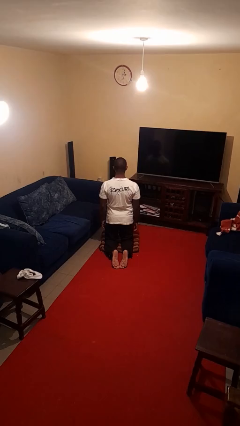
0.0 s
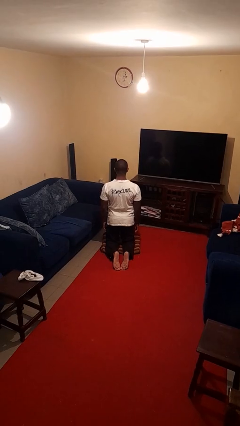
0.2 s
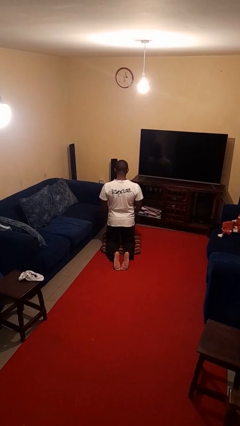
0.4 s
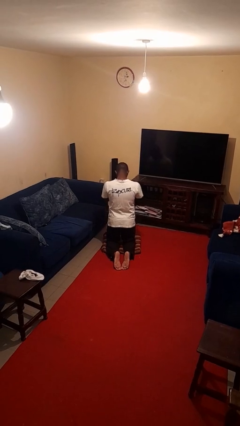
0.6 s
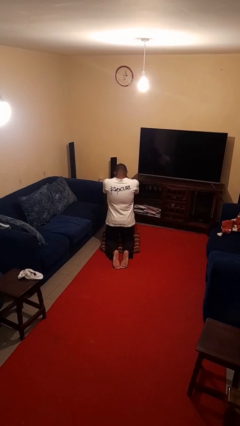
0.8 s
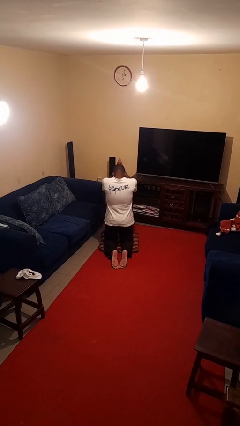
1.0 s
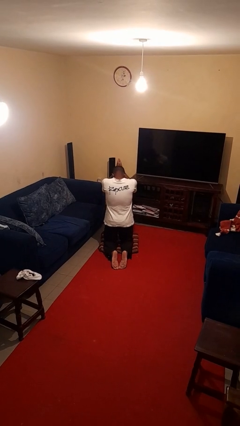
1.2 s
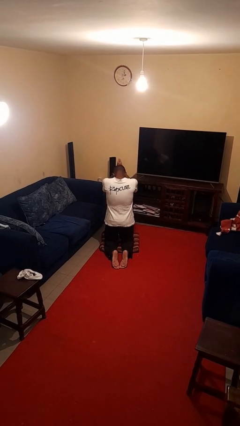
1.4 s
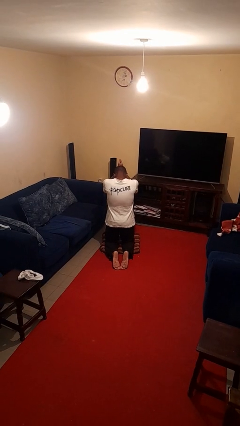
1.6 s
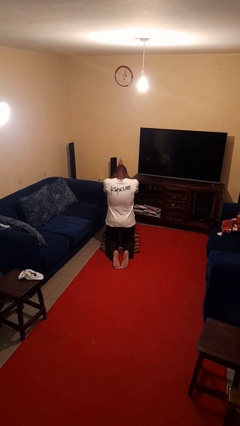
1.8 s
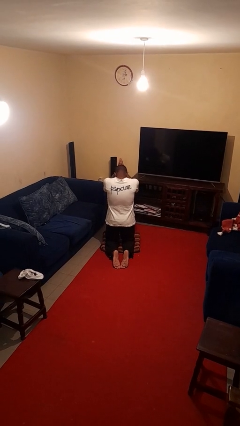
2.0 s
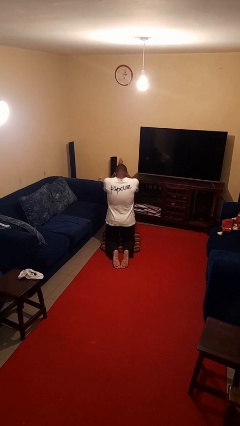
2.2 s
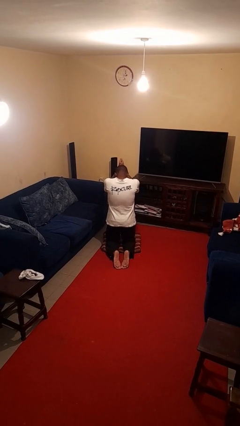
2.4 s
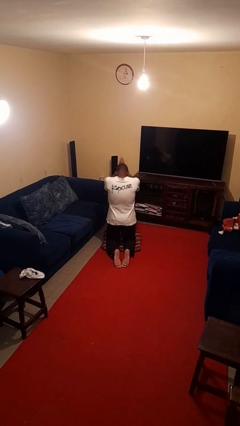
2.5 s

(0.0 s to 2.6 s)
person prays

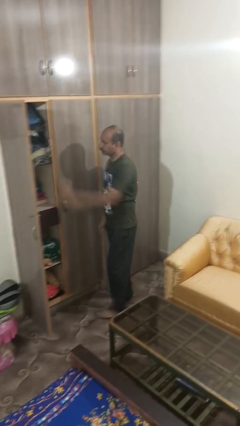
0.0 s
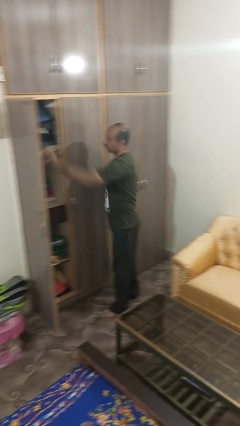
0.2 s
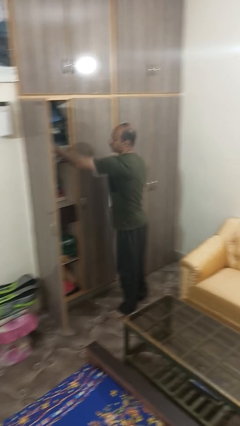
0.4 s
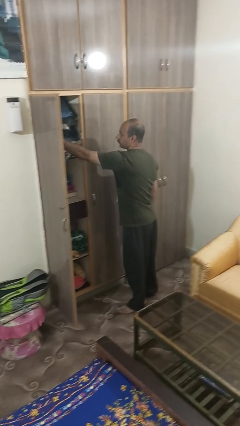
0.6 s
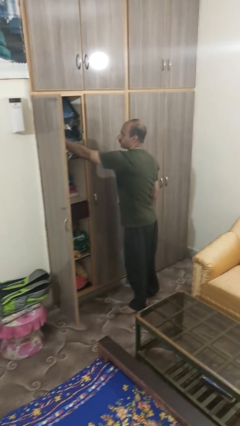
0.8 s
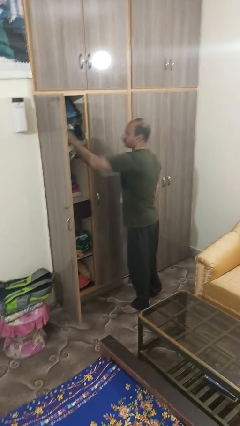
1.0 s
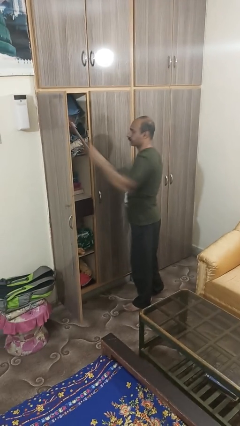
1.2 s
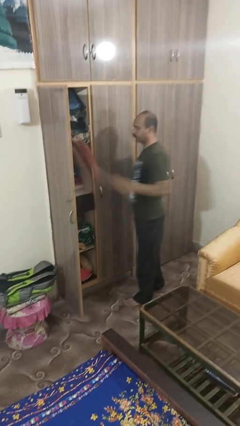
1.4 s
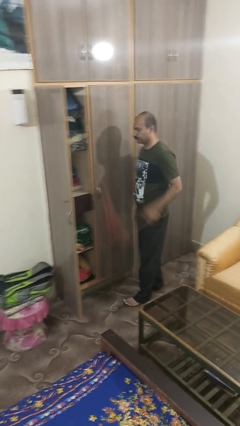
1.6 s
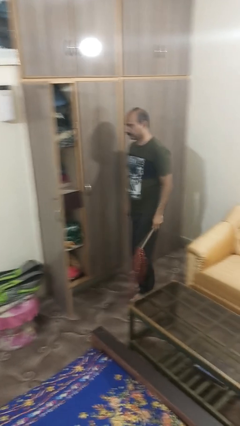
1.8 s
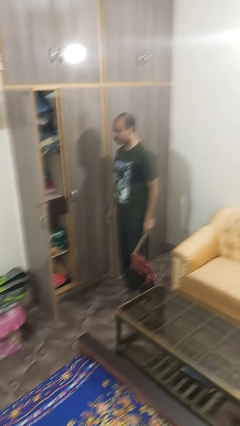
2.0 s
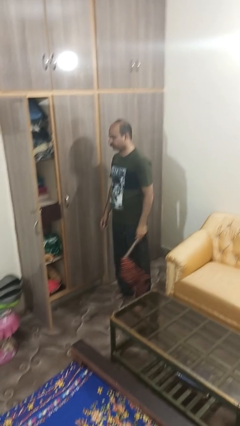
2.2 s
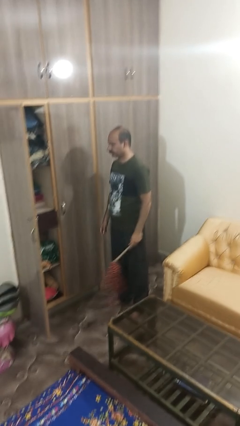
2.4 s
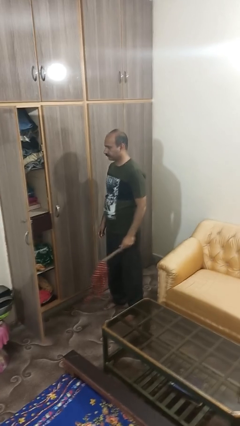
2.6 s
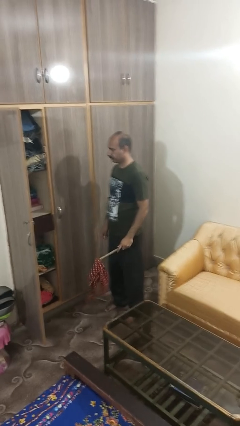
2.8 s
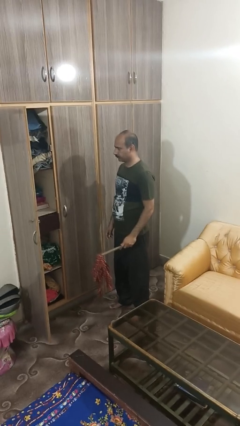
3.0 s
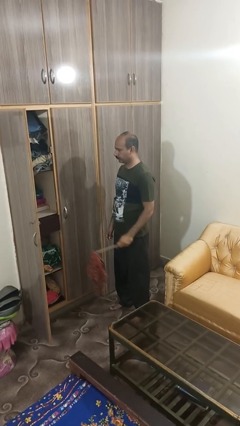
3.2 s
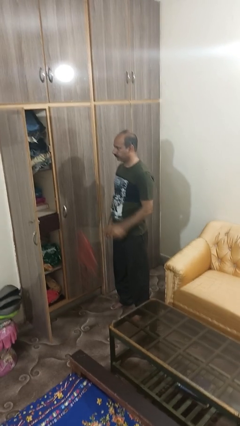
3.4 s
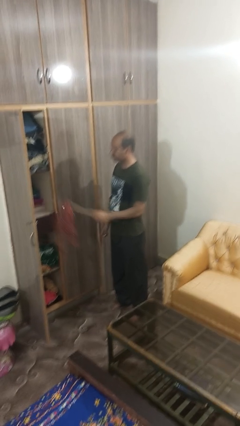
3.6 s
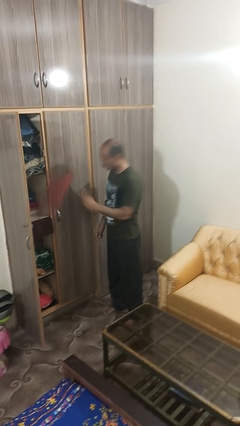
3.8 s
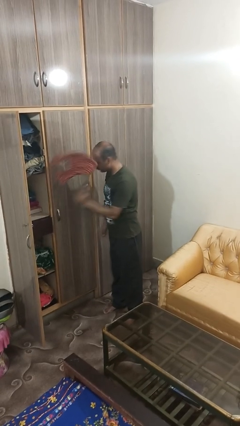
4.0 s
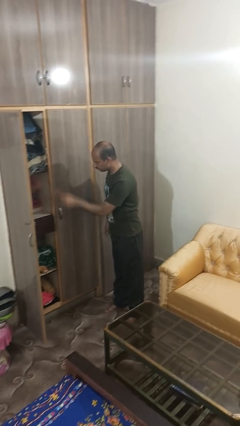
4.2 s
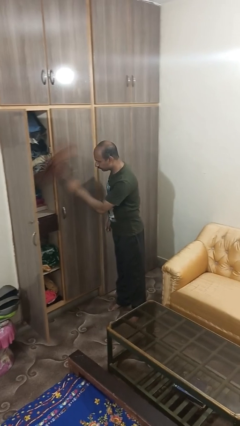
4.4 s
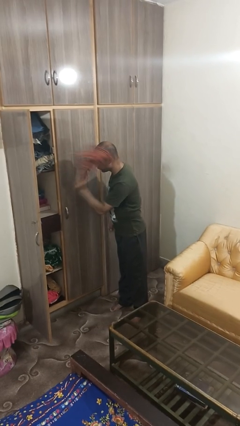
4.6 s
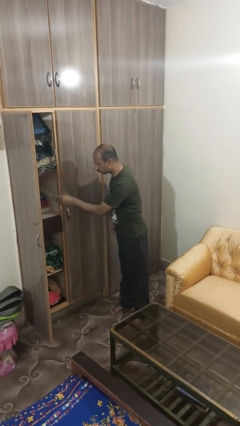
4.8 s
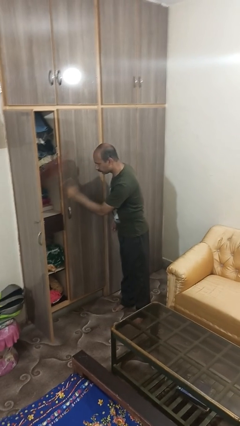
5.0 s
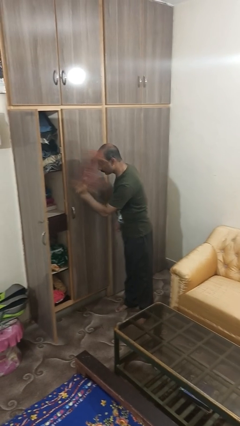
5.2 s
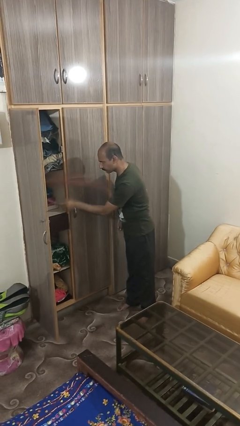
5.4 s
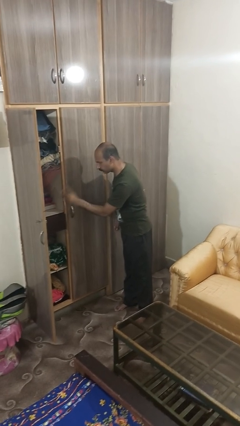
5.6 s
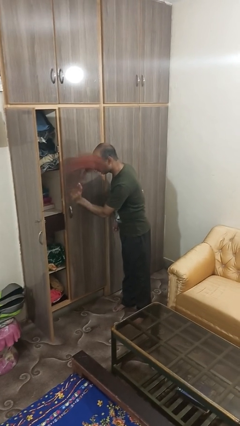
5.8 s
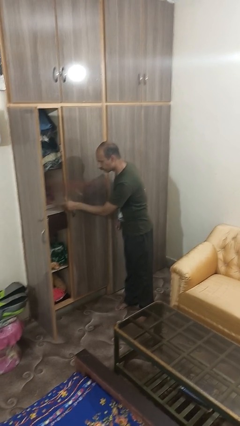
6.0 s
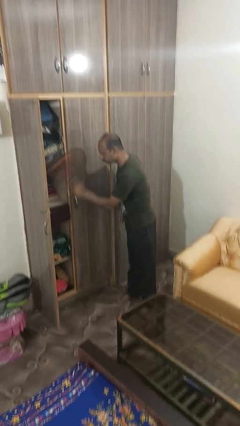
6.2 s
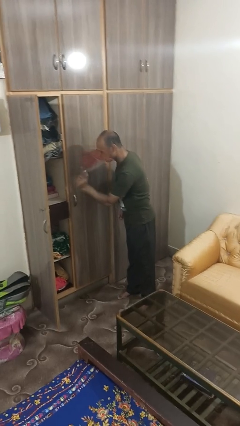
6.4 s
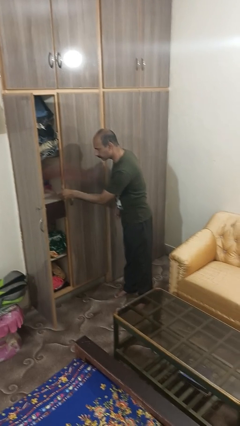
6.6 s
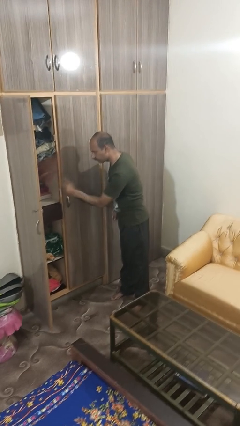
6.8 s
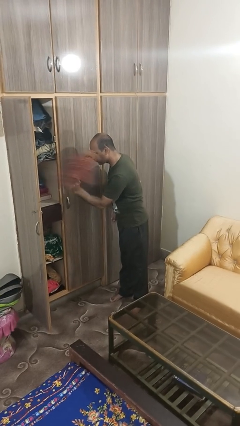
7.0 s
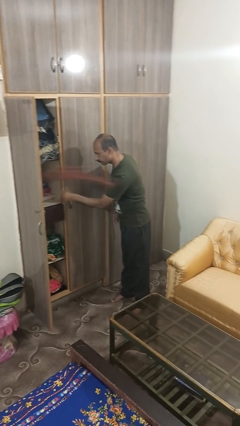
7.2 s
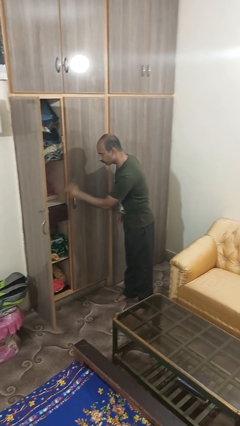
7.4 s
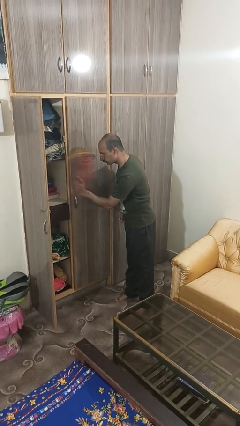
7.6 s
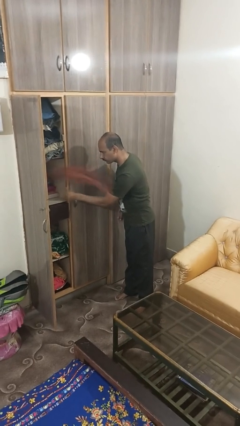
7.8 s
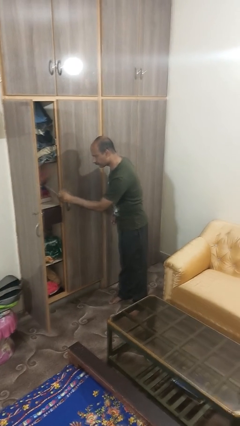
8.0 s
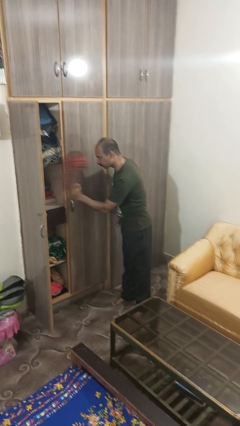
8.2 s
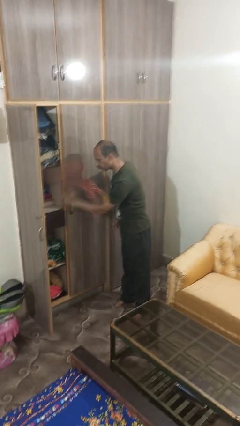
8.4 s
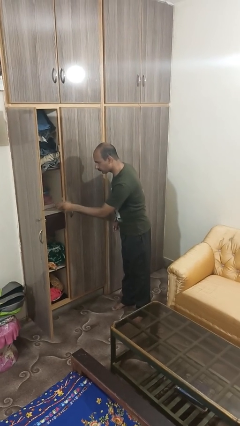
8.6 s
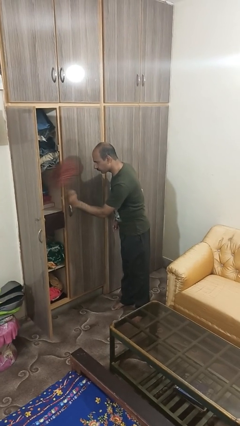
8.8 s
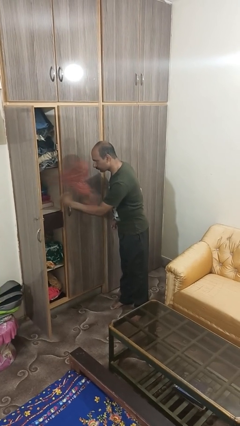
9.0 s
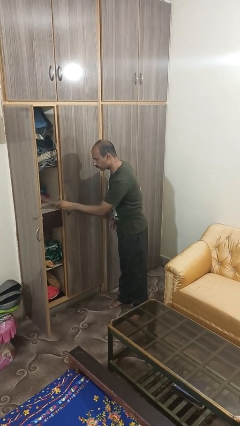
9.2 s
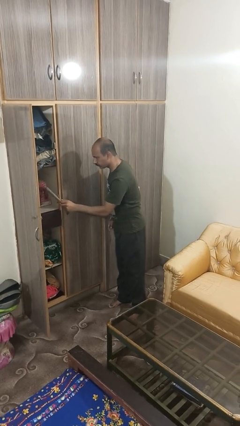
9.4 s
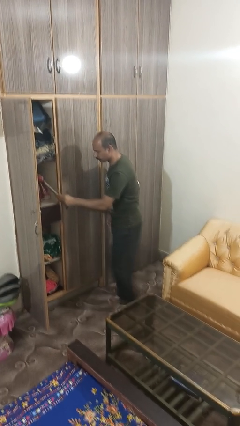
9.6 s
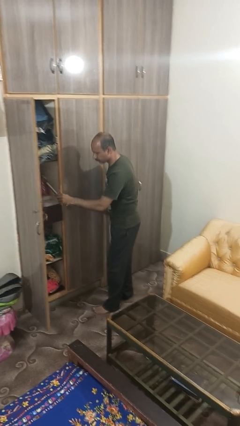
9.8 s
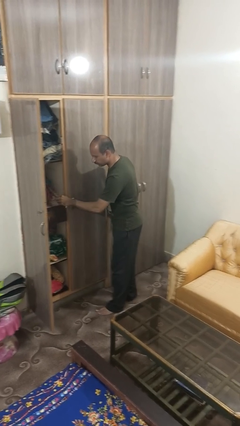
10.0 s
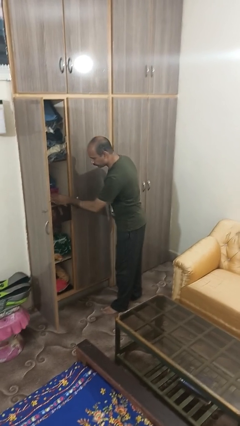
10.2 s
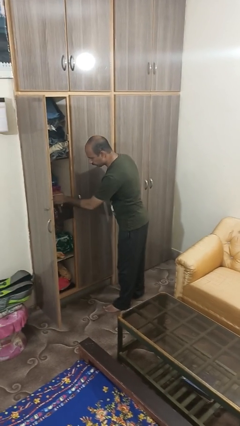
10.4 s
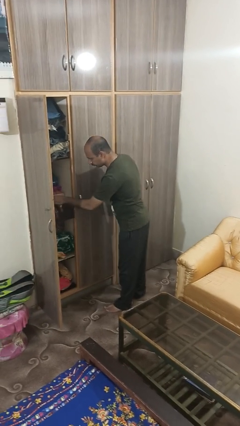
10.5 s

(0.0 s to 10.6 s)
person dusts furniture

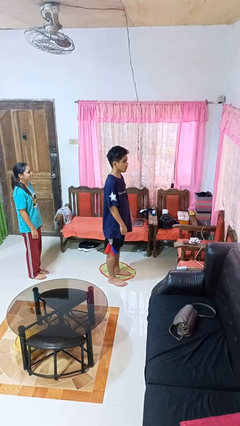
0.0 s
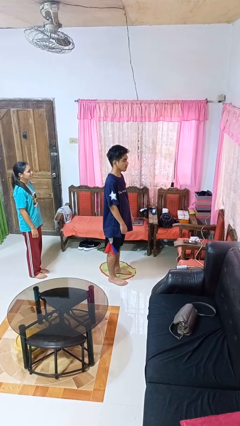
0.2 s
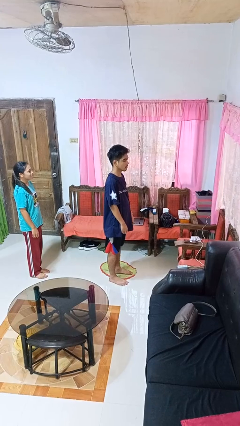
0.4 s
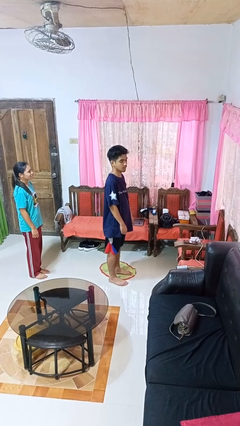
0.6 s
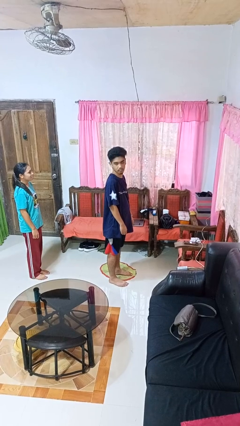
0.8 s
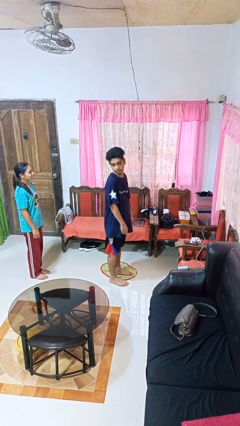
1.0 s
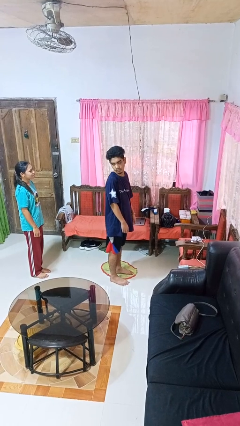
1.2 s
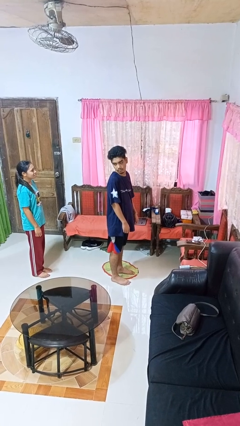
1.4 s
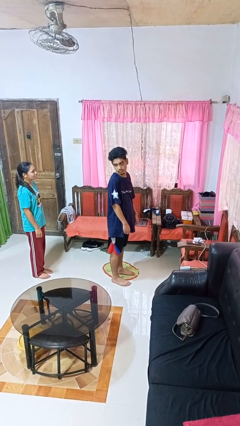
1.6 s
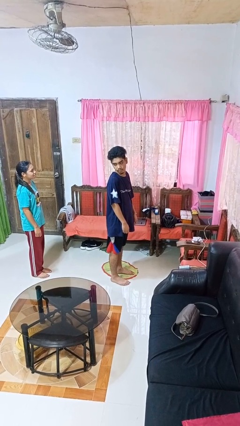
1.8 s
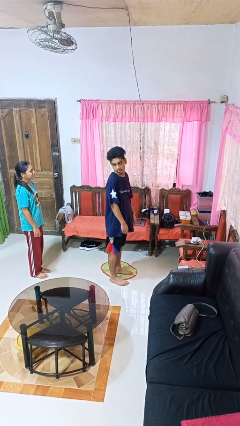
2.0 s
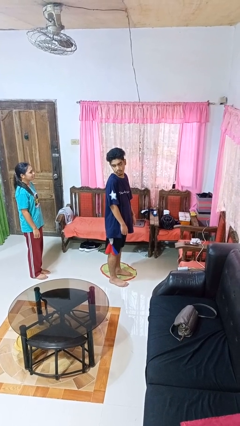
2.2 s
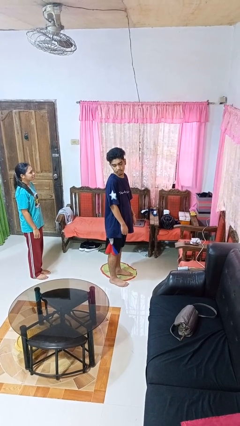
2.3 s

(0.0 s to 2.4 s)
person looks over shoulder

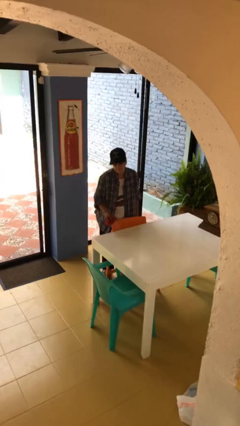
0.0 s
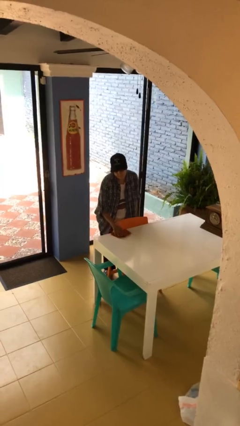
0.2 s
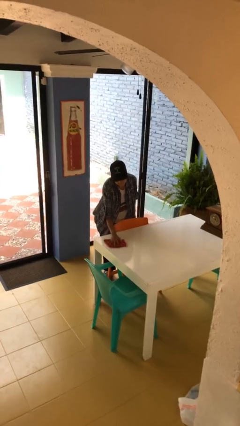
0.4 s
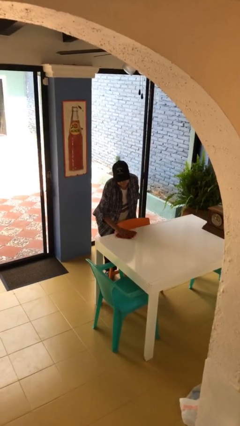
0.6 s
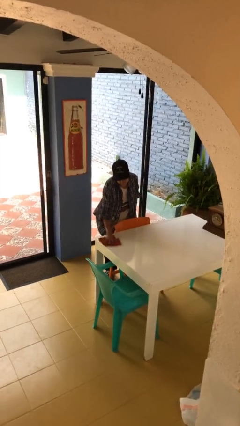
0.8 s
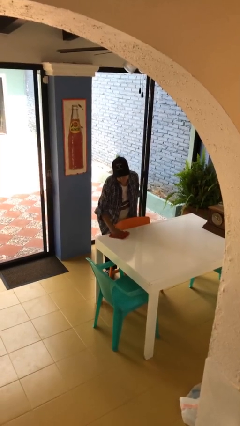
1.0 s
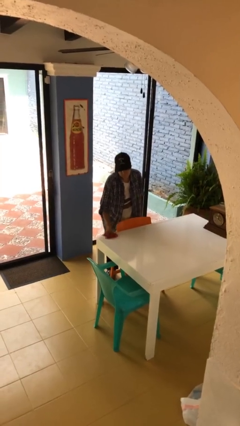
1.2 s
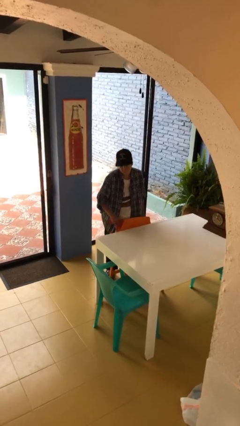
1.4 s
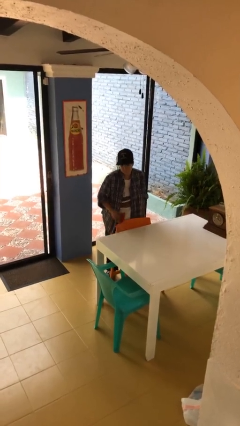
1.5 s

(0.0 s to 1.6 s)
person cleans table with rag

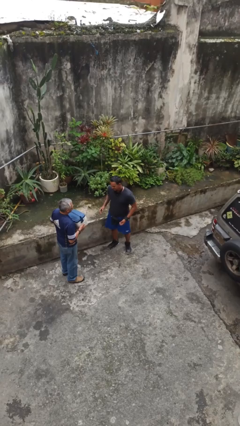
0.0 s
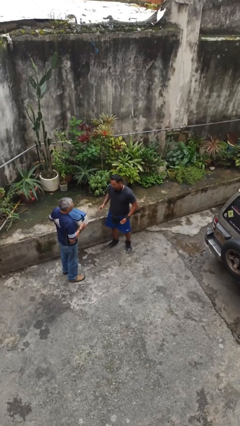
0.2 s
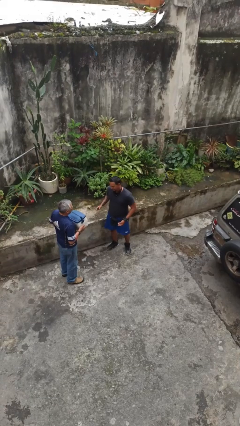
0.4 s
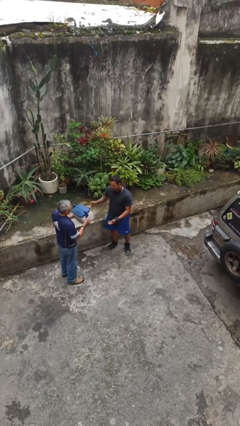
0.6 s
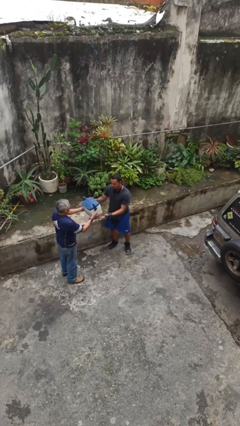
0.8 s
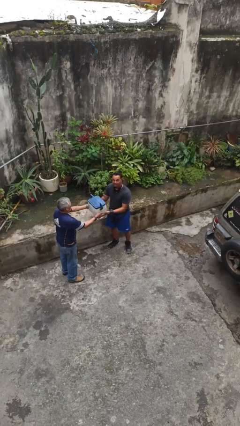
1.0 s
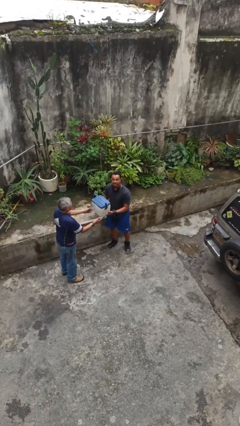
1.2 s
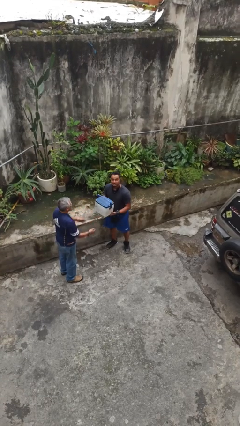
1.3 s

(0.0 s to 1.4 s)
person transfers object to person
